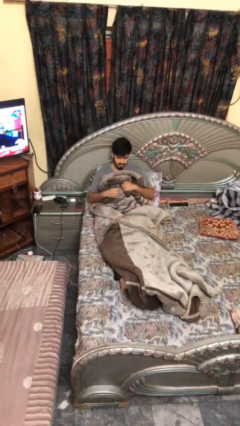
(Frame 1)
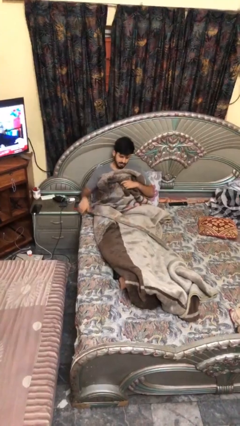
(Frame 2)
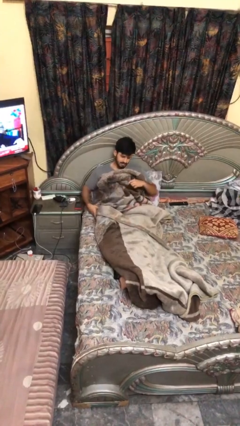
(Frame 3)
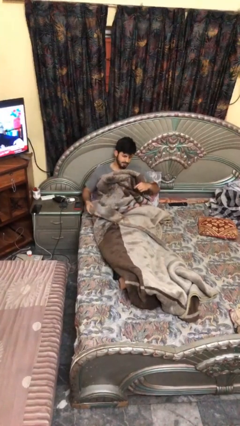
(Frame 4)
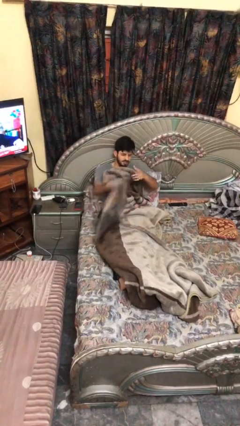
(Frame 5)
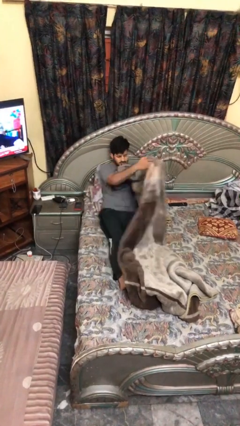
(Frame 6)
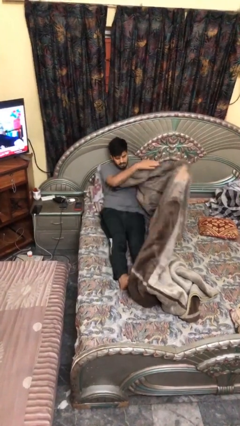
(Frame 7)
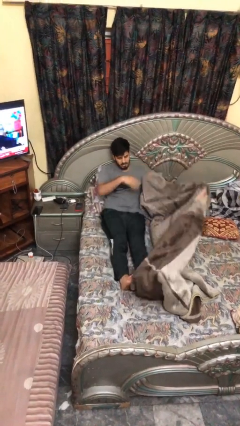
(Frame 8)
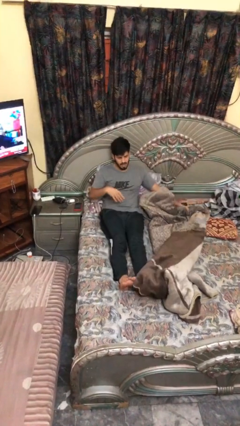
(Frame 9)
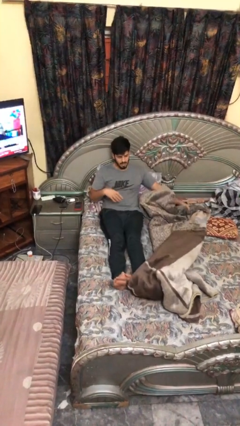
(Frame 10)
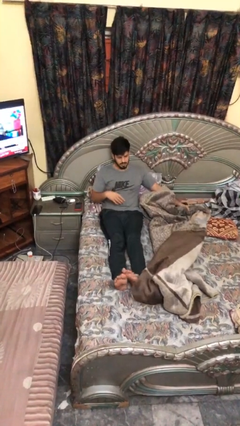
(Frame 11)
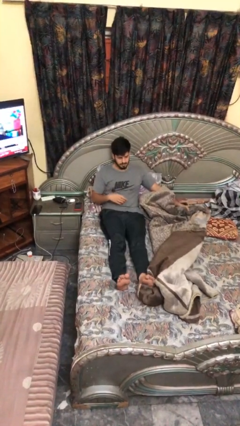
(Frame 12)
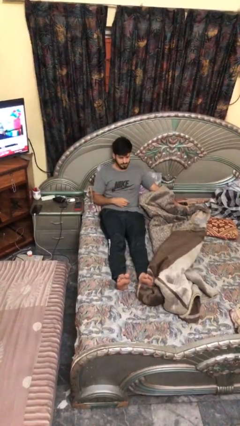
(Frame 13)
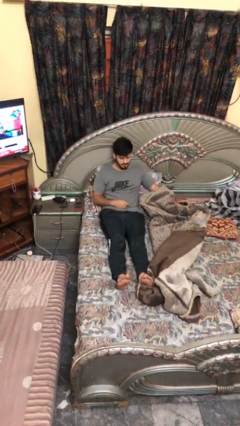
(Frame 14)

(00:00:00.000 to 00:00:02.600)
person uncovers with blanket

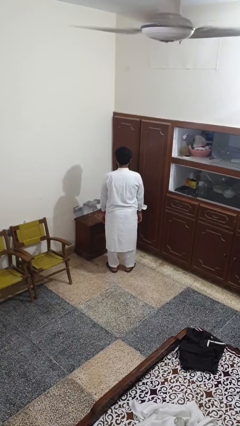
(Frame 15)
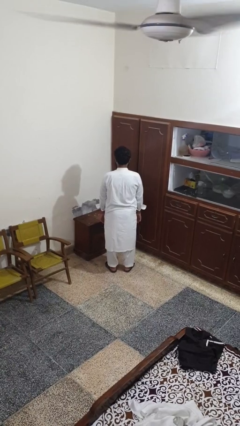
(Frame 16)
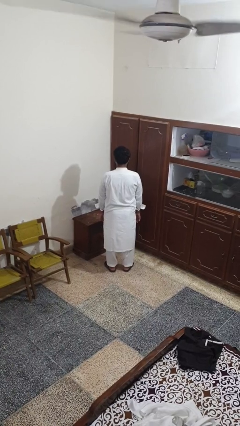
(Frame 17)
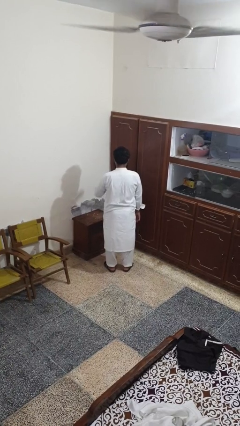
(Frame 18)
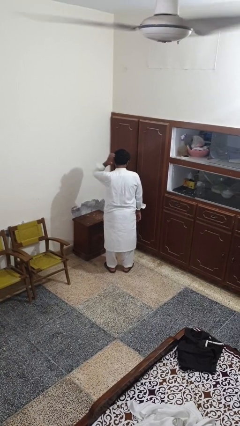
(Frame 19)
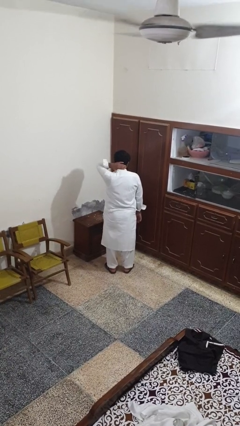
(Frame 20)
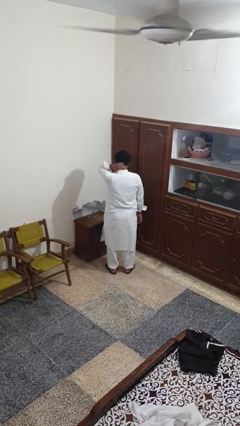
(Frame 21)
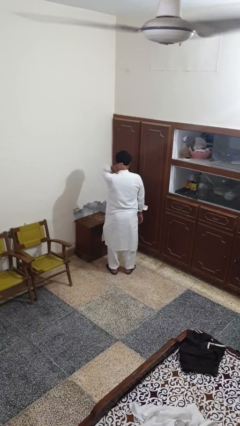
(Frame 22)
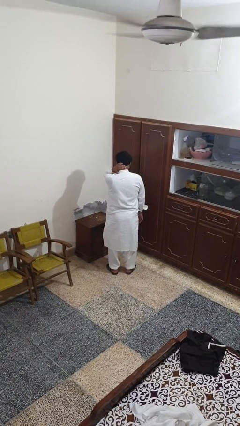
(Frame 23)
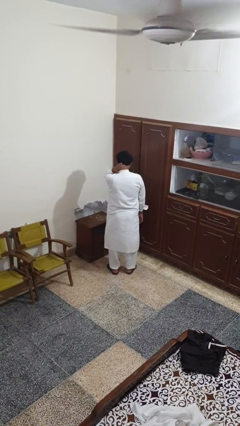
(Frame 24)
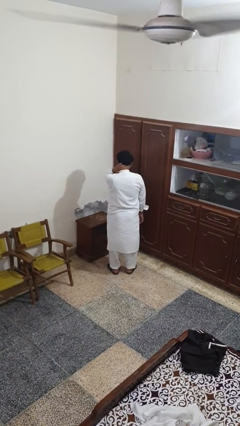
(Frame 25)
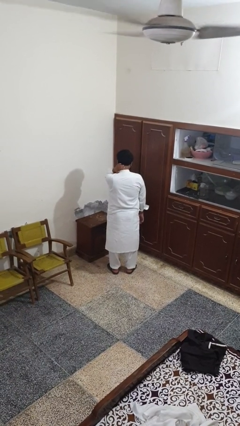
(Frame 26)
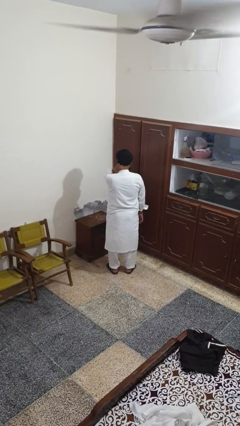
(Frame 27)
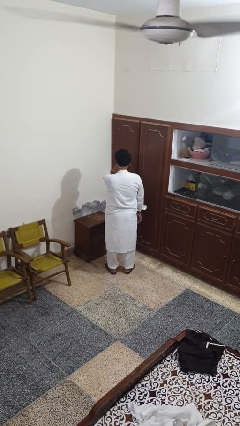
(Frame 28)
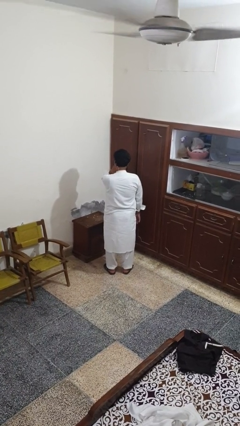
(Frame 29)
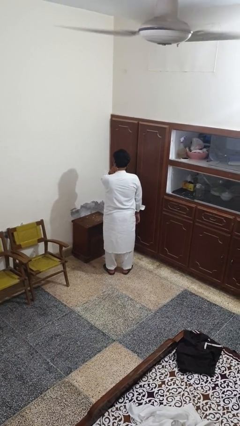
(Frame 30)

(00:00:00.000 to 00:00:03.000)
person rubs neck

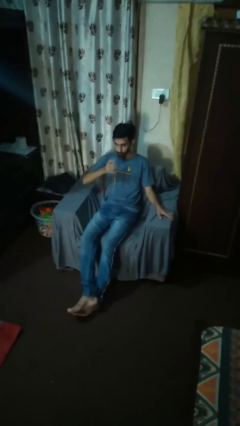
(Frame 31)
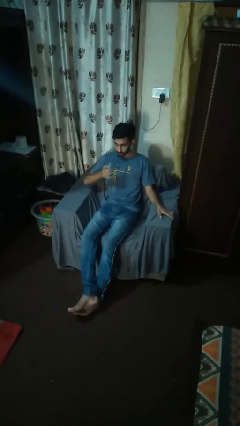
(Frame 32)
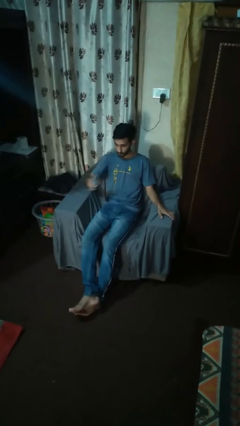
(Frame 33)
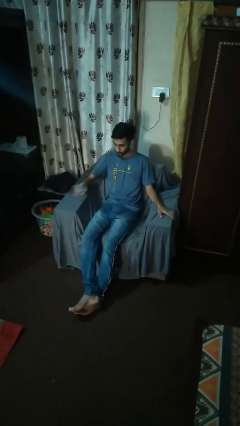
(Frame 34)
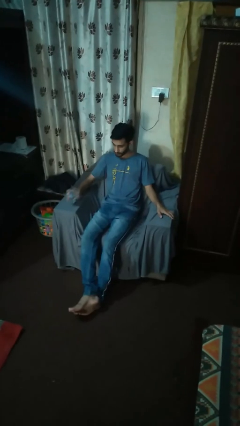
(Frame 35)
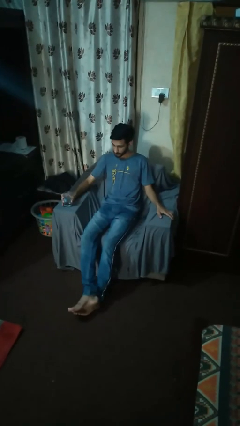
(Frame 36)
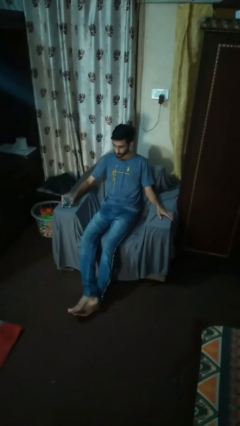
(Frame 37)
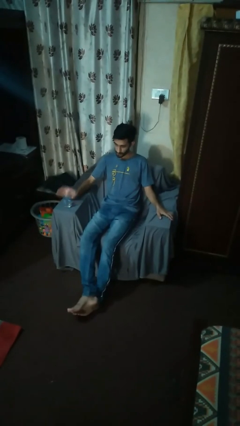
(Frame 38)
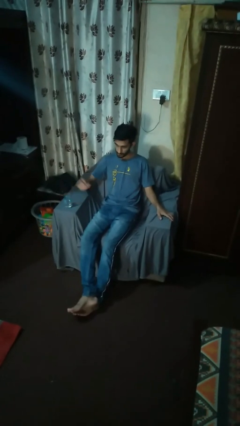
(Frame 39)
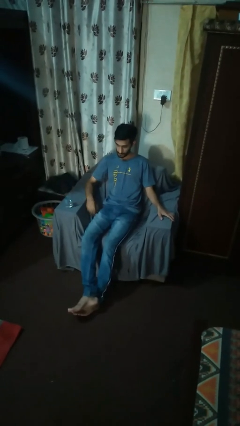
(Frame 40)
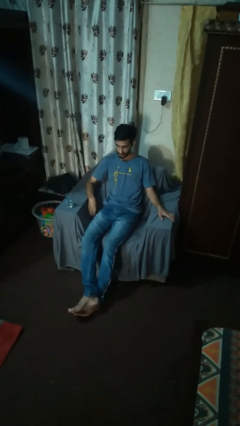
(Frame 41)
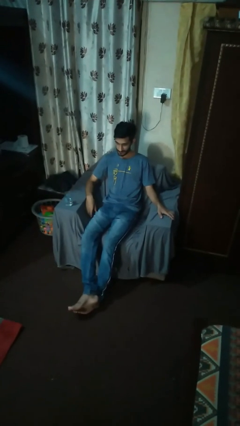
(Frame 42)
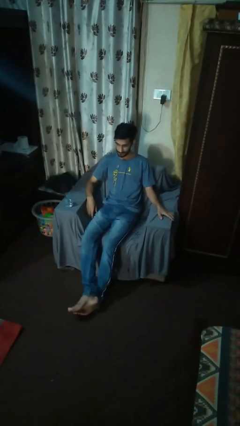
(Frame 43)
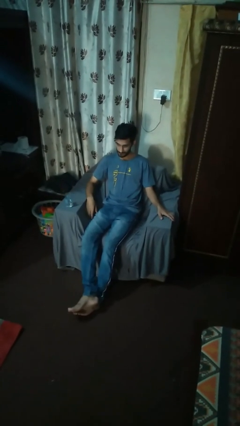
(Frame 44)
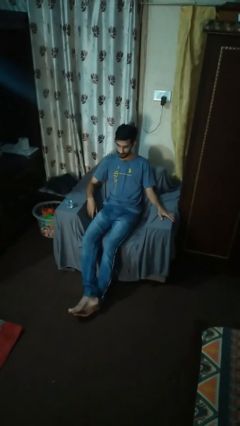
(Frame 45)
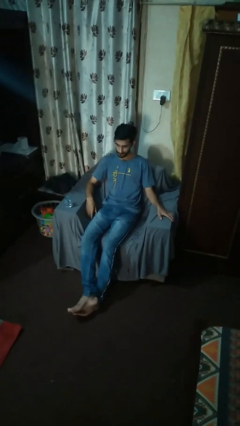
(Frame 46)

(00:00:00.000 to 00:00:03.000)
person puts down object on table

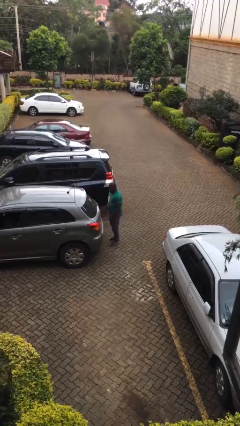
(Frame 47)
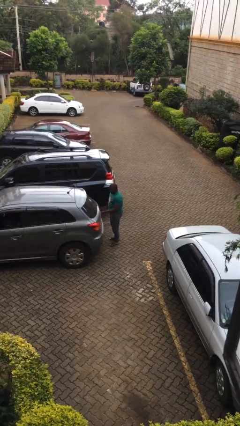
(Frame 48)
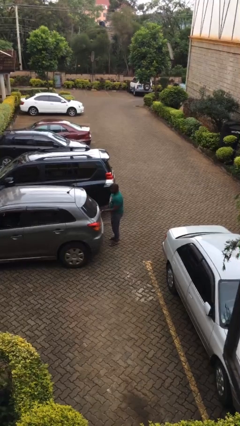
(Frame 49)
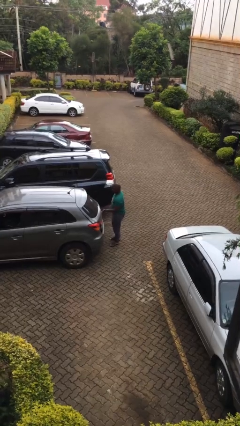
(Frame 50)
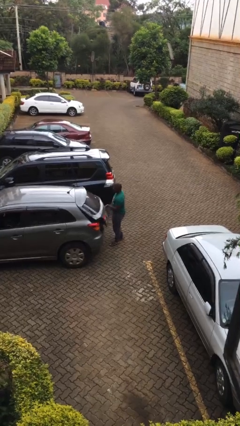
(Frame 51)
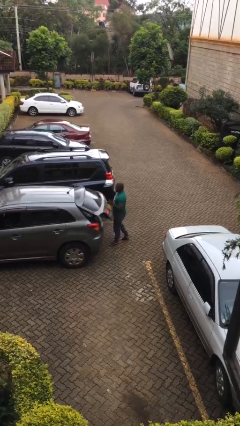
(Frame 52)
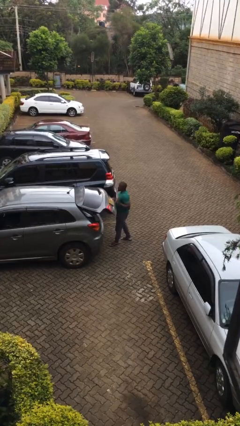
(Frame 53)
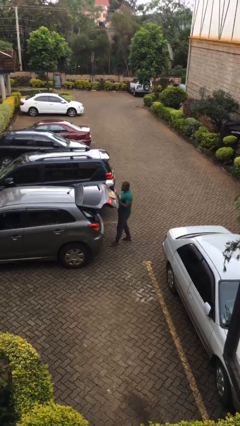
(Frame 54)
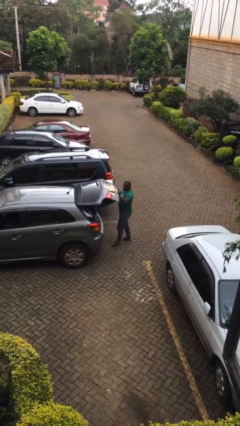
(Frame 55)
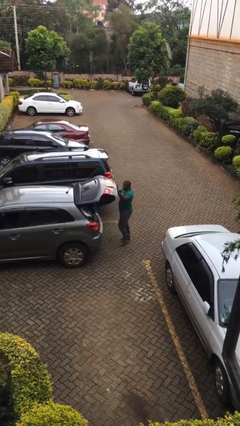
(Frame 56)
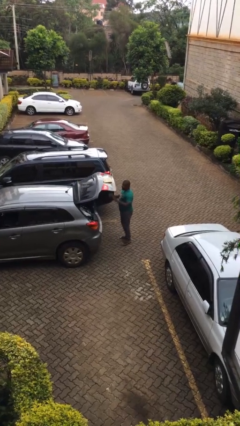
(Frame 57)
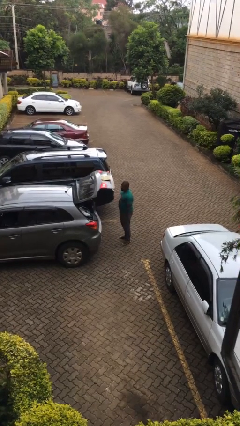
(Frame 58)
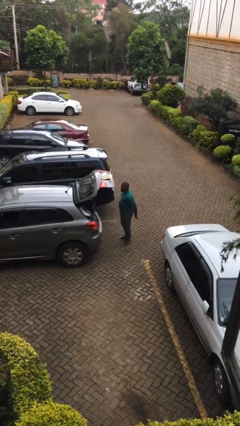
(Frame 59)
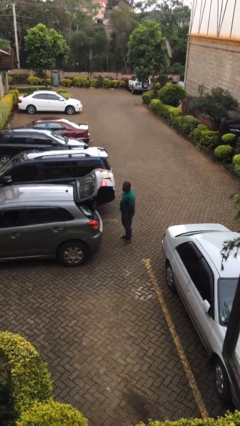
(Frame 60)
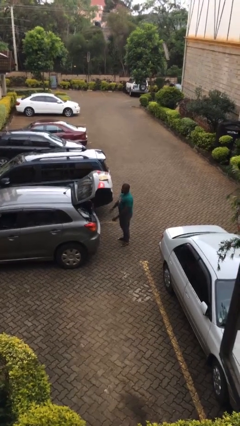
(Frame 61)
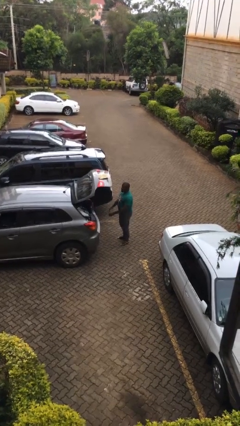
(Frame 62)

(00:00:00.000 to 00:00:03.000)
person opens car trunk

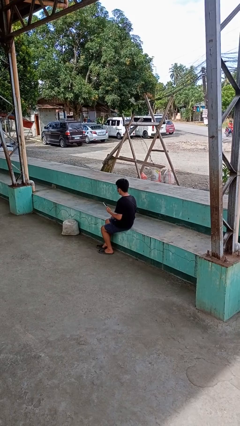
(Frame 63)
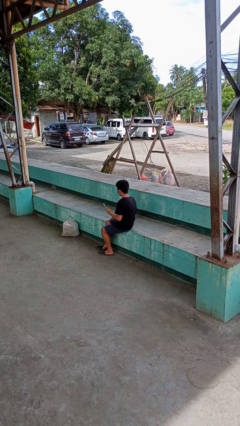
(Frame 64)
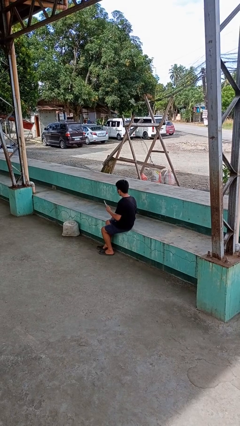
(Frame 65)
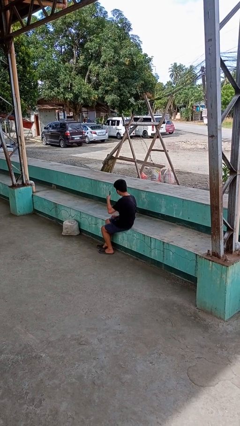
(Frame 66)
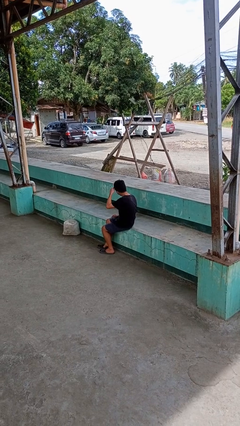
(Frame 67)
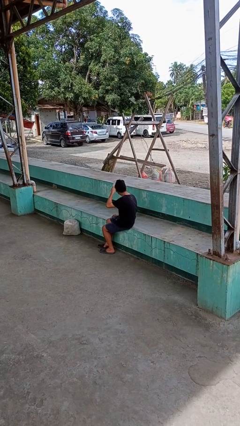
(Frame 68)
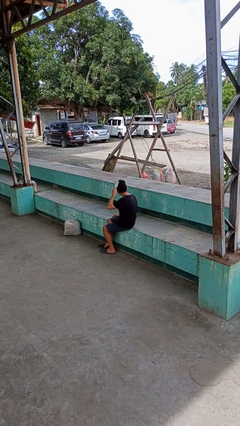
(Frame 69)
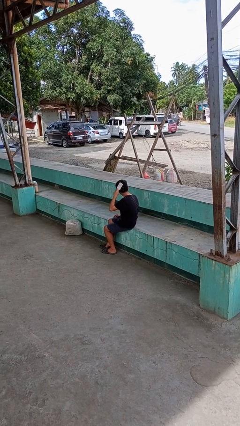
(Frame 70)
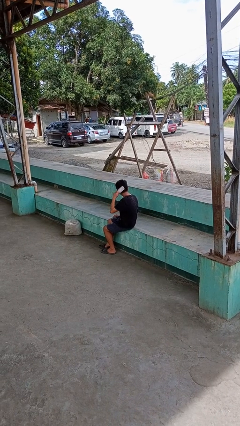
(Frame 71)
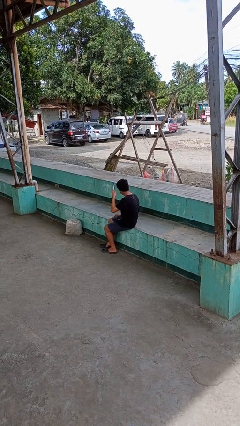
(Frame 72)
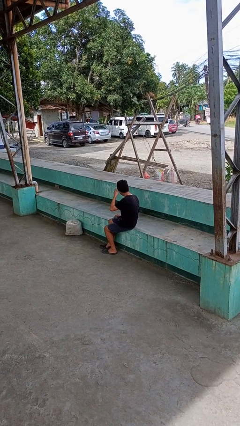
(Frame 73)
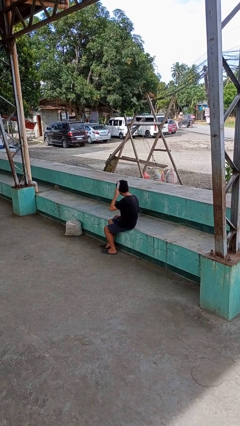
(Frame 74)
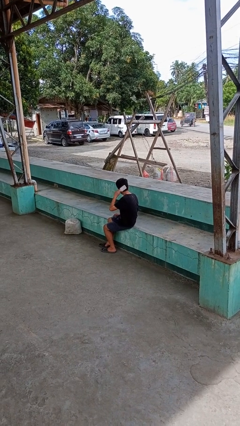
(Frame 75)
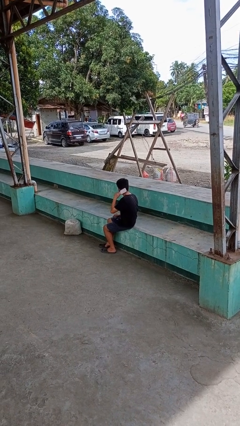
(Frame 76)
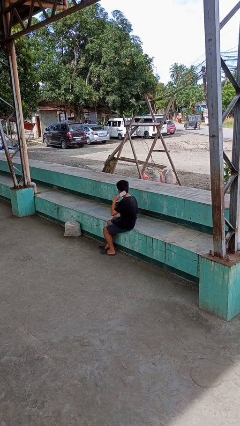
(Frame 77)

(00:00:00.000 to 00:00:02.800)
person brushes hair

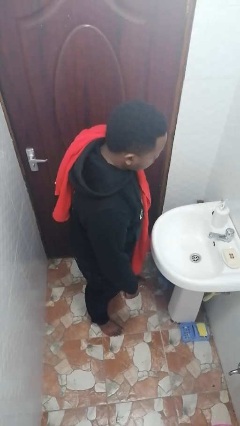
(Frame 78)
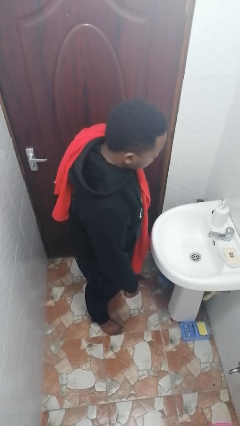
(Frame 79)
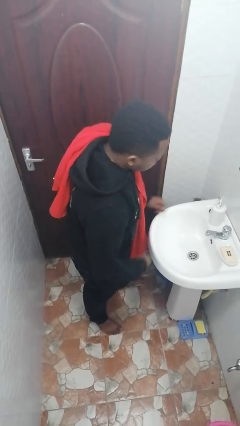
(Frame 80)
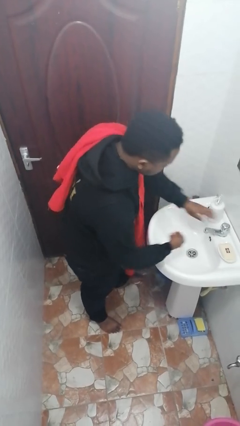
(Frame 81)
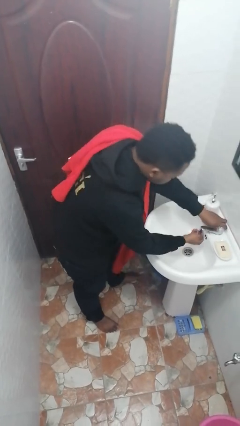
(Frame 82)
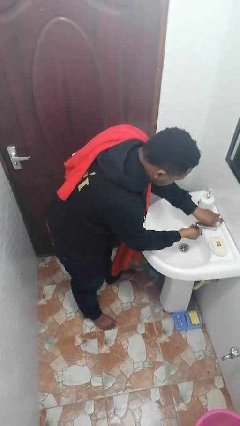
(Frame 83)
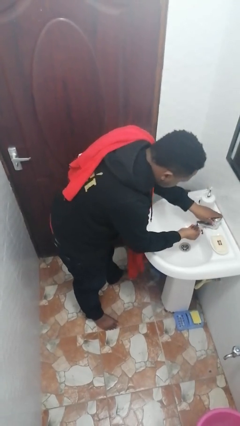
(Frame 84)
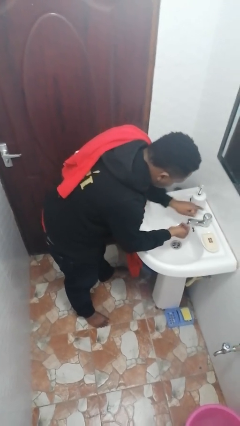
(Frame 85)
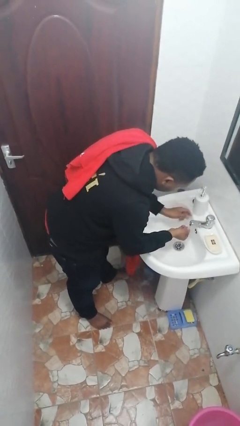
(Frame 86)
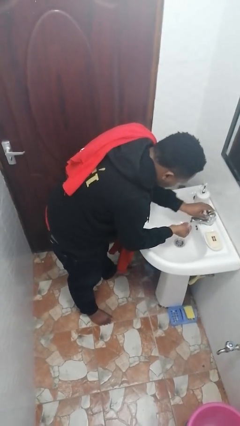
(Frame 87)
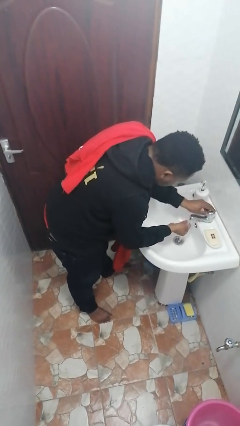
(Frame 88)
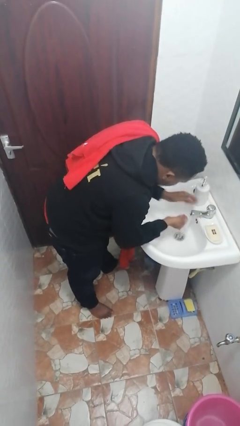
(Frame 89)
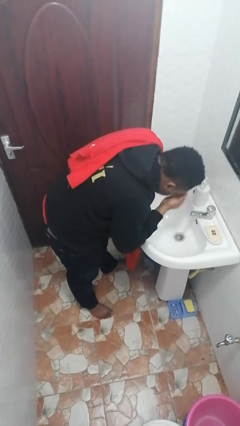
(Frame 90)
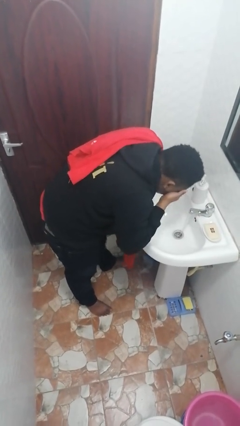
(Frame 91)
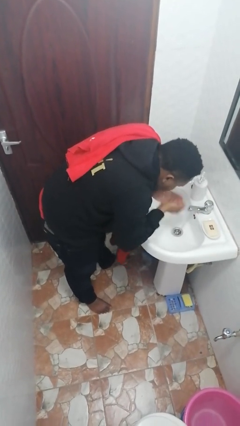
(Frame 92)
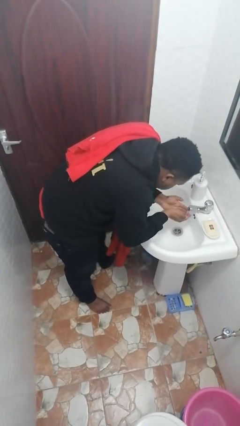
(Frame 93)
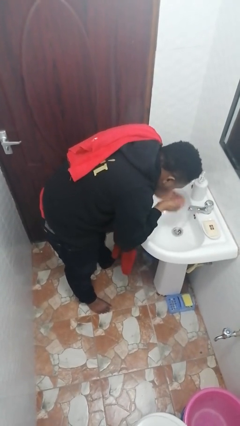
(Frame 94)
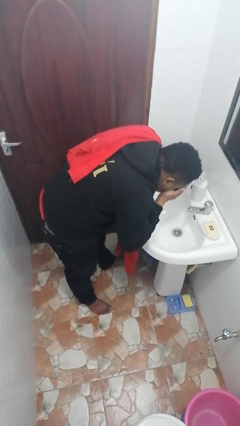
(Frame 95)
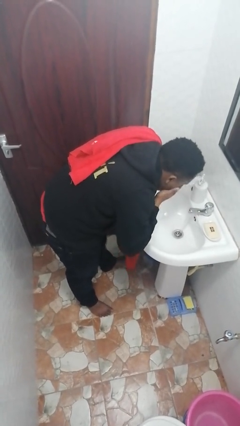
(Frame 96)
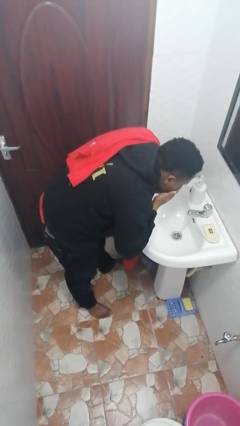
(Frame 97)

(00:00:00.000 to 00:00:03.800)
person washes face
